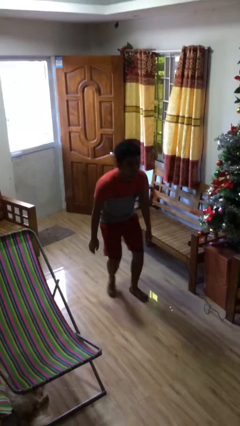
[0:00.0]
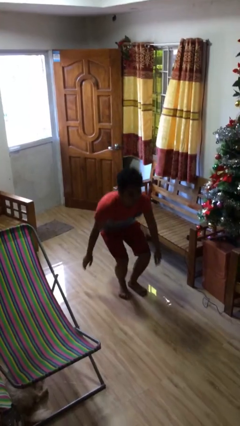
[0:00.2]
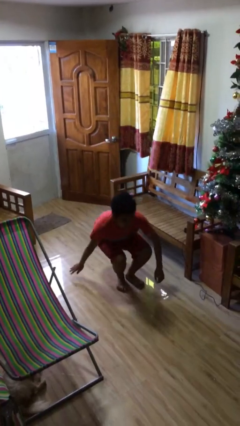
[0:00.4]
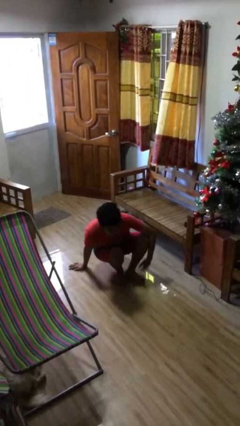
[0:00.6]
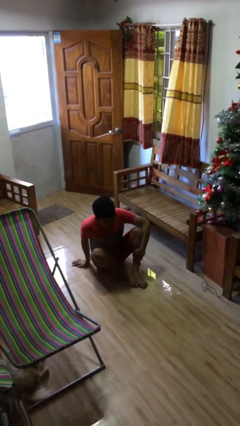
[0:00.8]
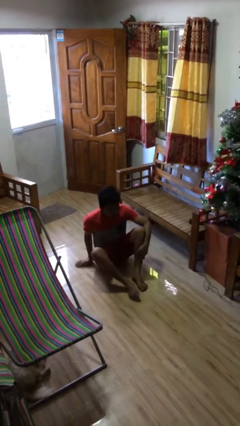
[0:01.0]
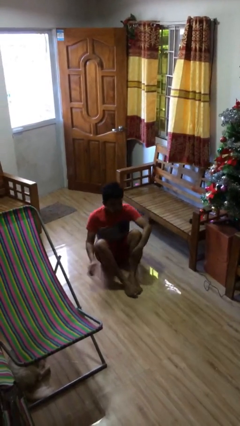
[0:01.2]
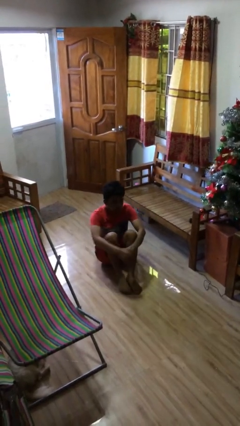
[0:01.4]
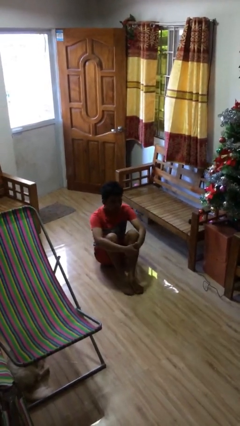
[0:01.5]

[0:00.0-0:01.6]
person sits down

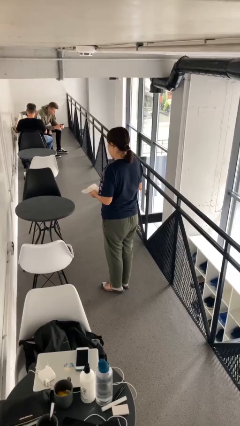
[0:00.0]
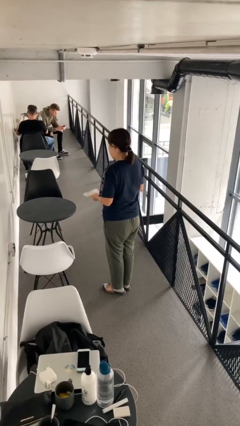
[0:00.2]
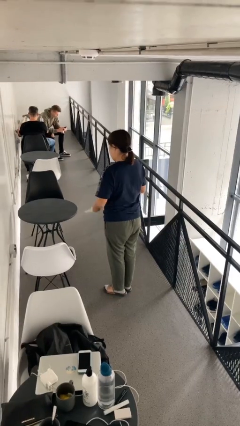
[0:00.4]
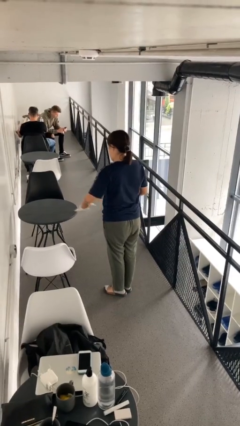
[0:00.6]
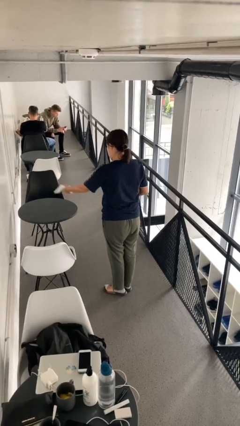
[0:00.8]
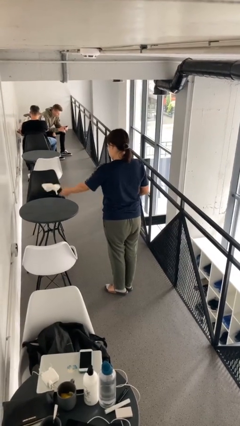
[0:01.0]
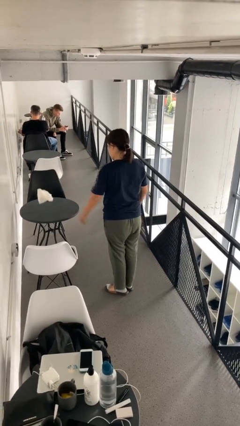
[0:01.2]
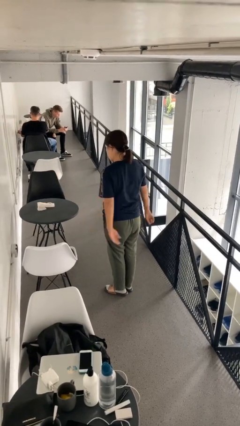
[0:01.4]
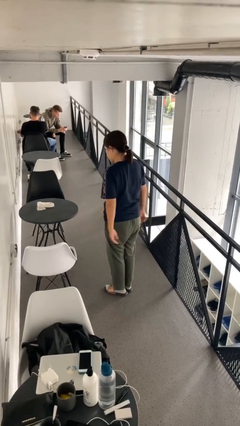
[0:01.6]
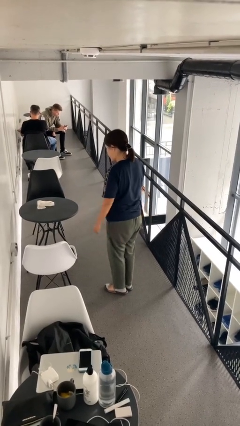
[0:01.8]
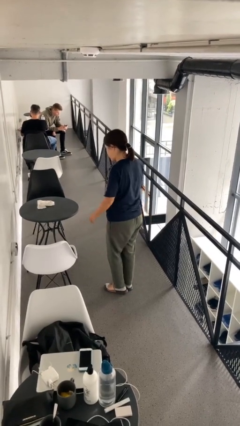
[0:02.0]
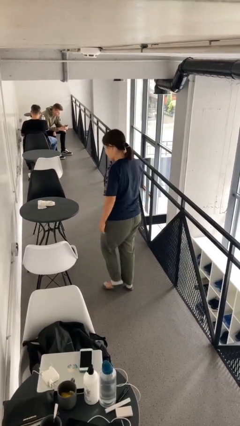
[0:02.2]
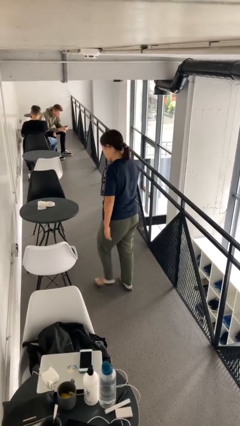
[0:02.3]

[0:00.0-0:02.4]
person throws object on table

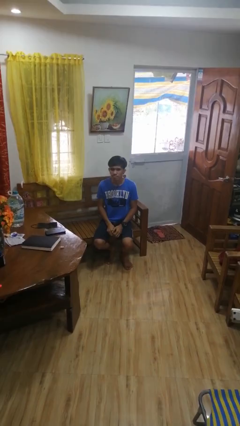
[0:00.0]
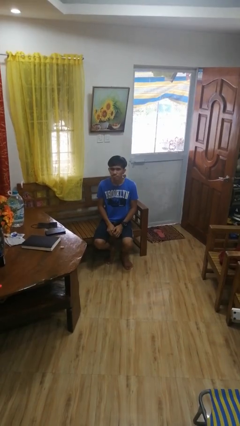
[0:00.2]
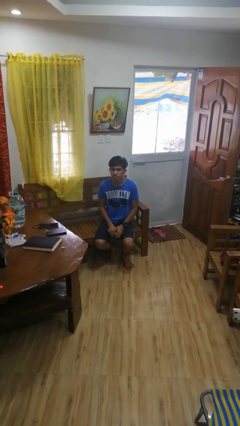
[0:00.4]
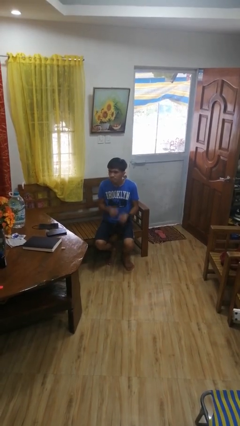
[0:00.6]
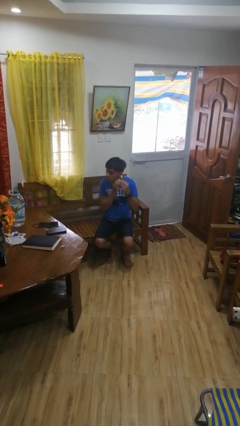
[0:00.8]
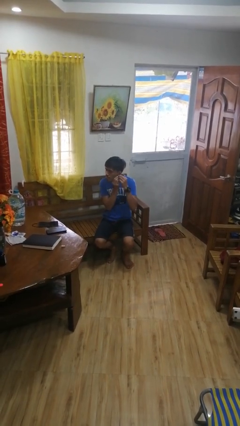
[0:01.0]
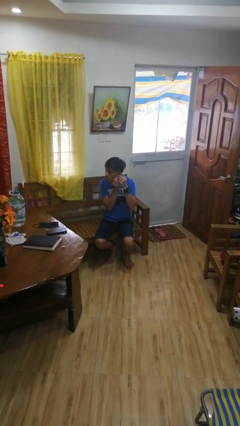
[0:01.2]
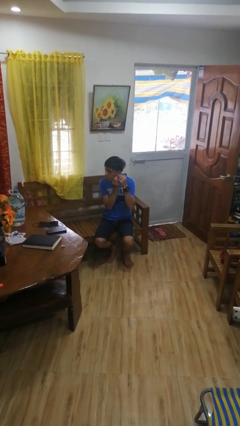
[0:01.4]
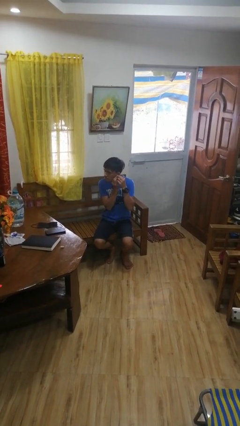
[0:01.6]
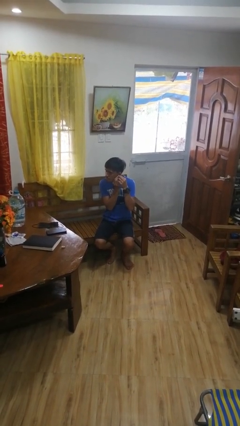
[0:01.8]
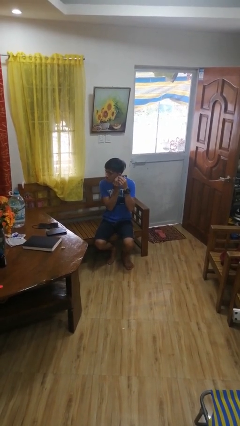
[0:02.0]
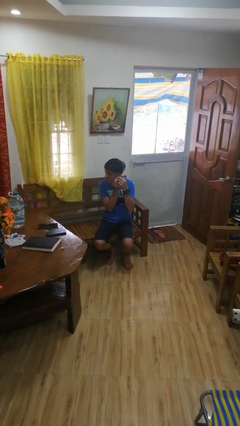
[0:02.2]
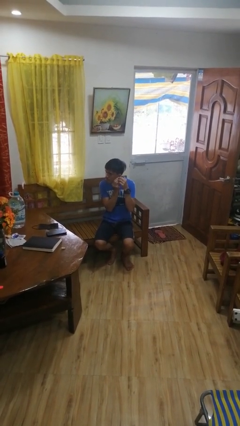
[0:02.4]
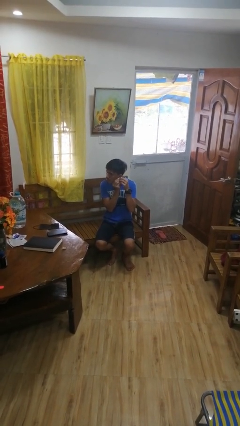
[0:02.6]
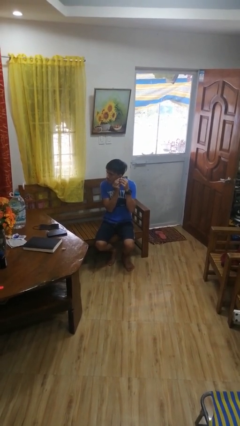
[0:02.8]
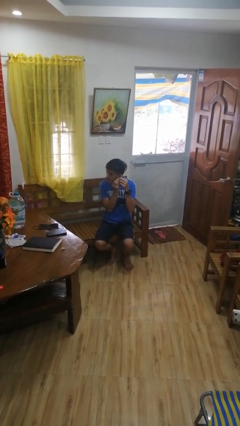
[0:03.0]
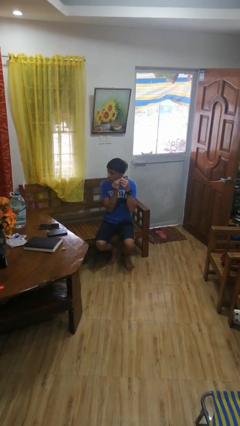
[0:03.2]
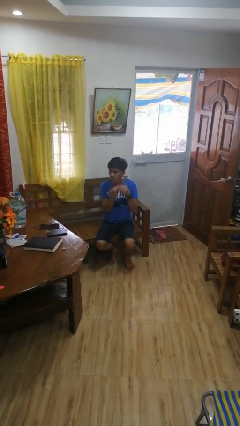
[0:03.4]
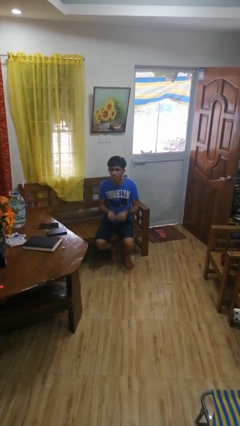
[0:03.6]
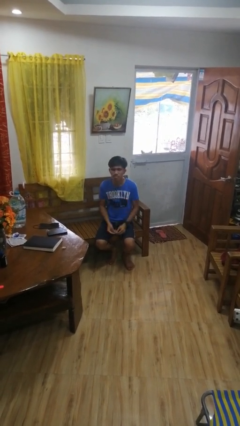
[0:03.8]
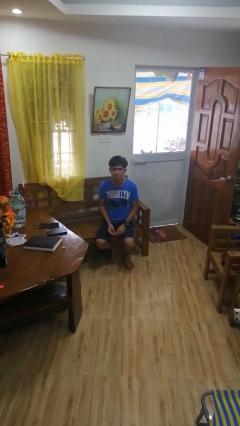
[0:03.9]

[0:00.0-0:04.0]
person takes off earrings

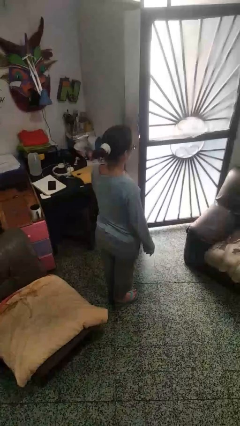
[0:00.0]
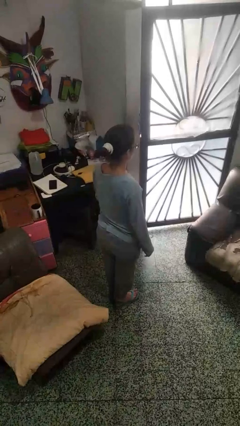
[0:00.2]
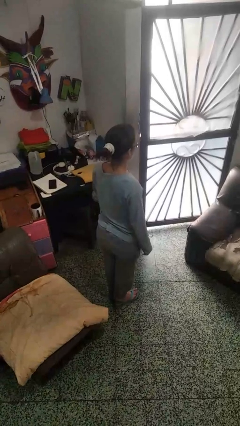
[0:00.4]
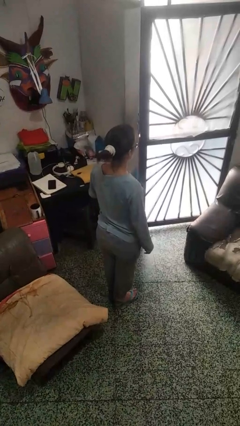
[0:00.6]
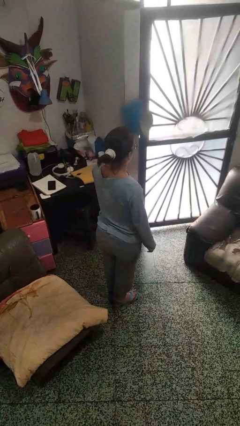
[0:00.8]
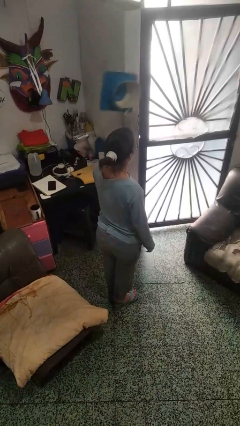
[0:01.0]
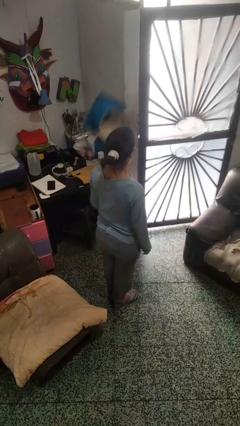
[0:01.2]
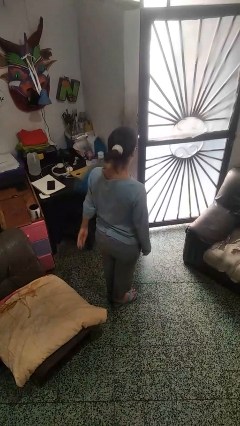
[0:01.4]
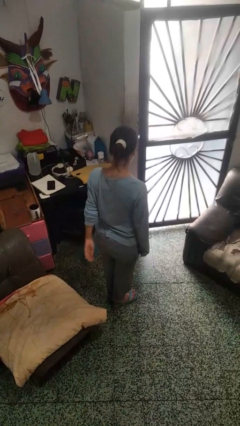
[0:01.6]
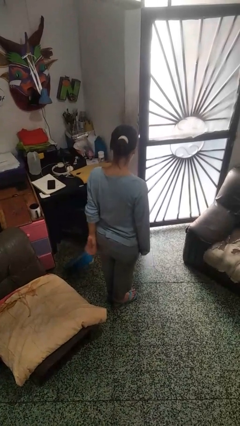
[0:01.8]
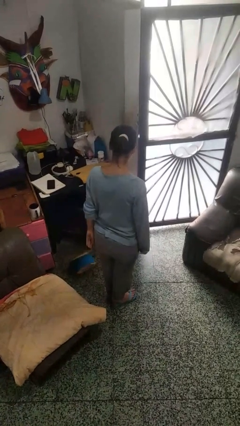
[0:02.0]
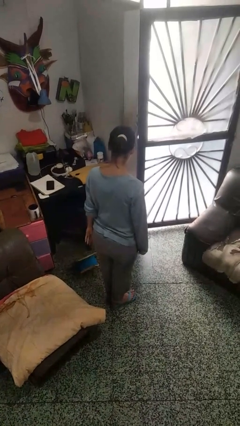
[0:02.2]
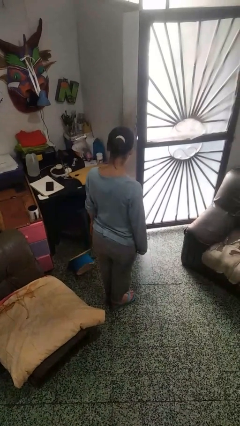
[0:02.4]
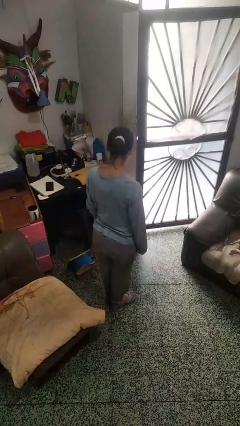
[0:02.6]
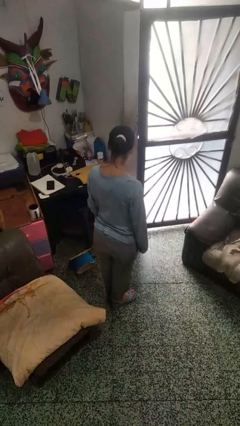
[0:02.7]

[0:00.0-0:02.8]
person throws object into air

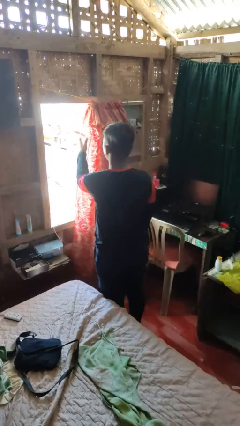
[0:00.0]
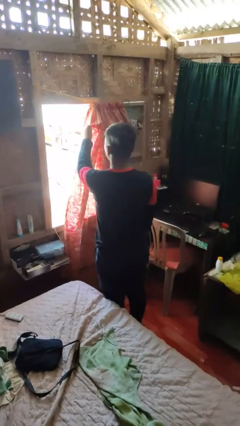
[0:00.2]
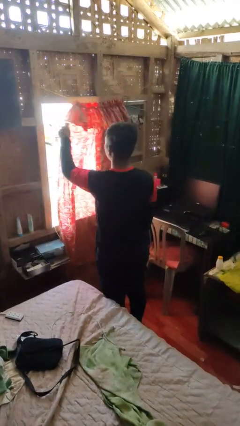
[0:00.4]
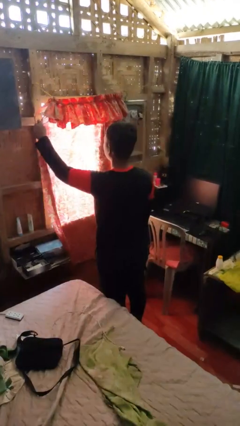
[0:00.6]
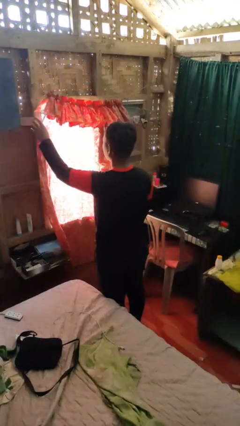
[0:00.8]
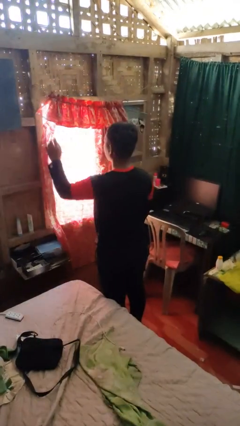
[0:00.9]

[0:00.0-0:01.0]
person closes curtains

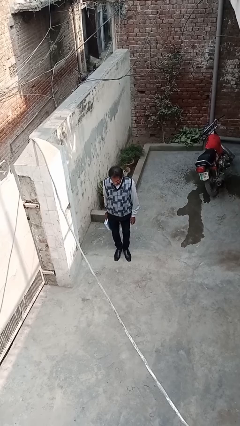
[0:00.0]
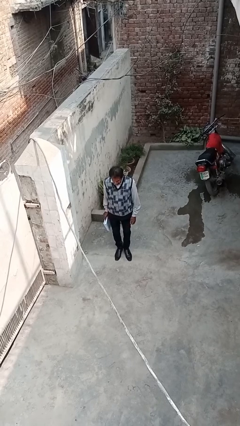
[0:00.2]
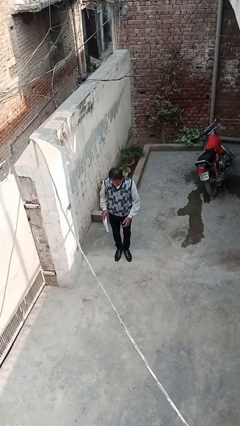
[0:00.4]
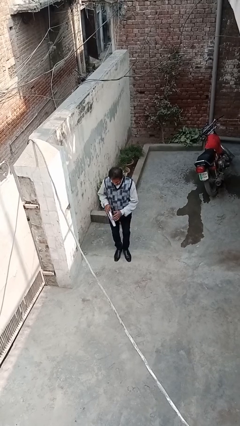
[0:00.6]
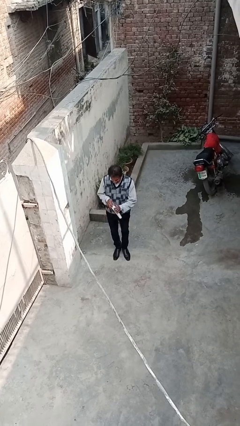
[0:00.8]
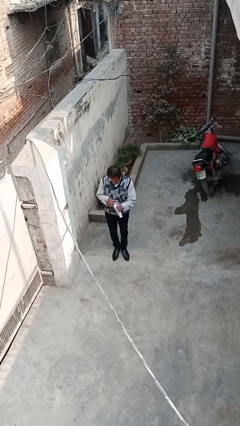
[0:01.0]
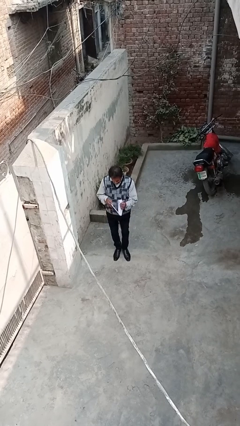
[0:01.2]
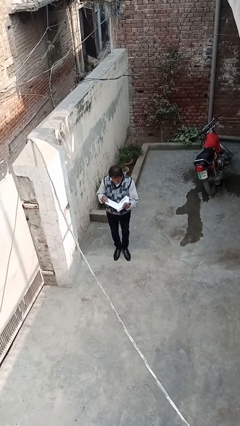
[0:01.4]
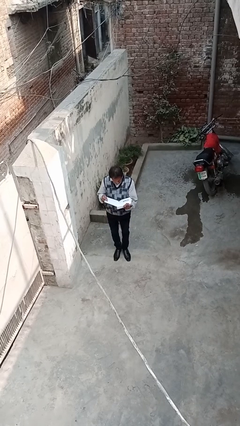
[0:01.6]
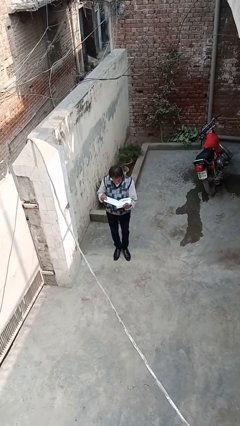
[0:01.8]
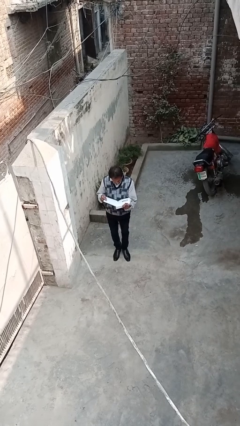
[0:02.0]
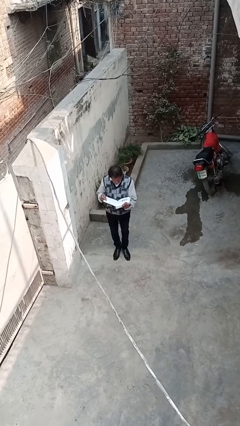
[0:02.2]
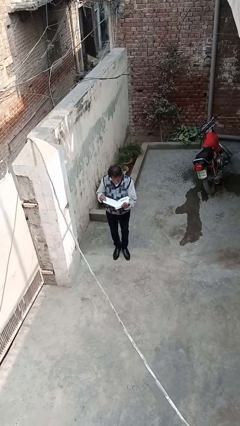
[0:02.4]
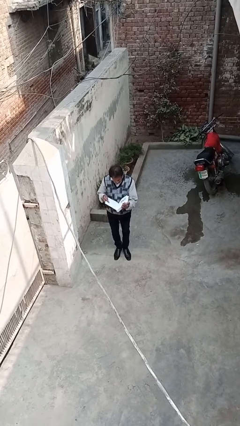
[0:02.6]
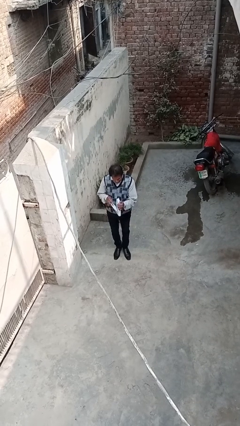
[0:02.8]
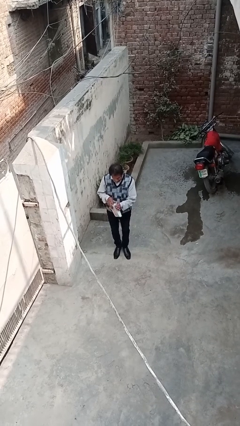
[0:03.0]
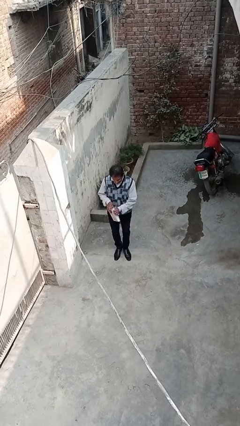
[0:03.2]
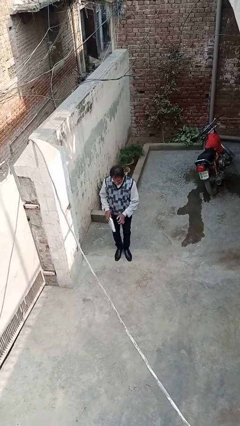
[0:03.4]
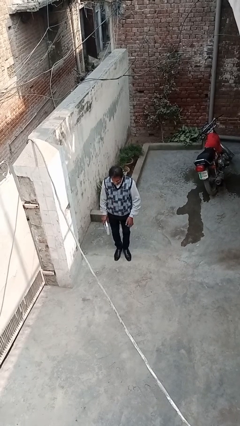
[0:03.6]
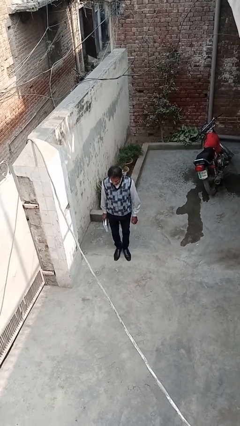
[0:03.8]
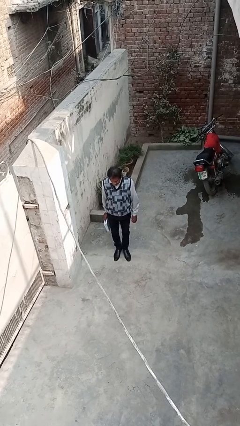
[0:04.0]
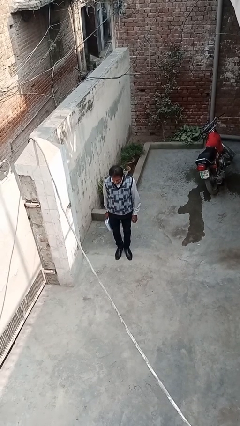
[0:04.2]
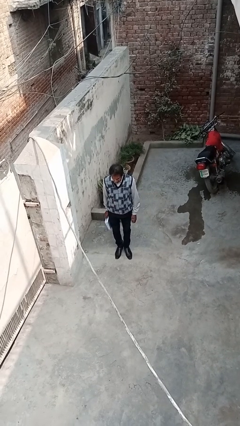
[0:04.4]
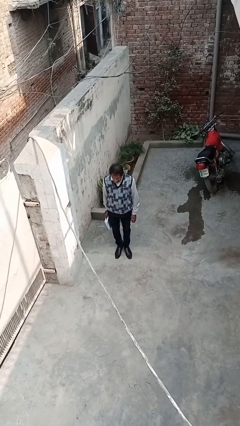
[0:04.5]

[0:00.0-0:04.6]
person reads document
